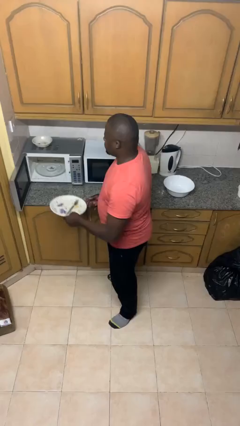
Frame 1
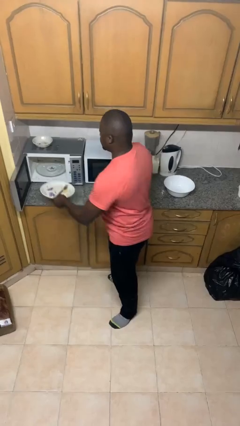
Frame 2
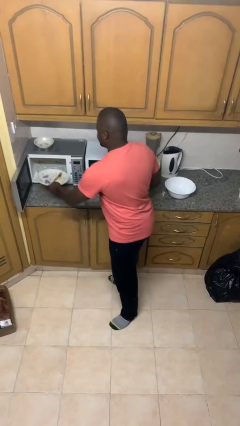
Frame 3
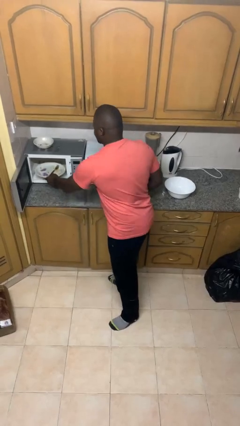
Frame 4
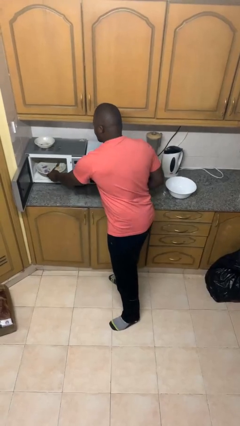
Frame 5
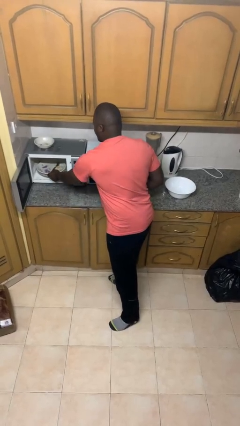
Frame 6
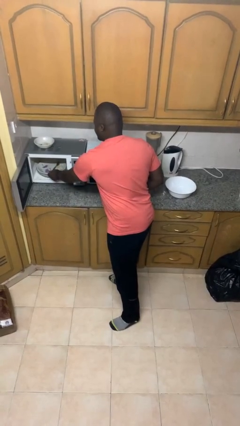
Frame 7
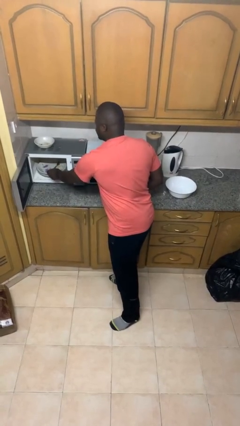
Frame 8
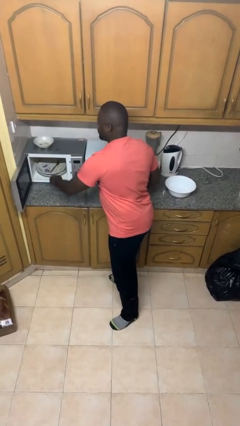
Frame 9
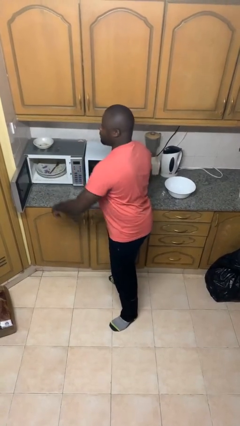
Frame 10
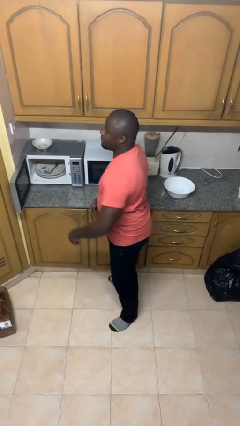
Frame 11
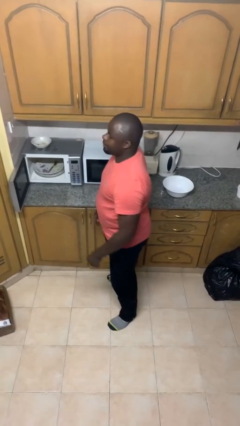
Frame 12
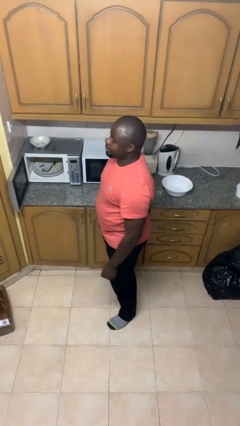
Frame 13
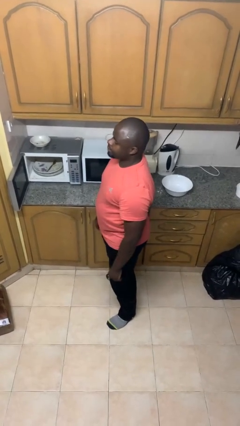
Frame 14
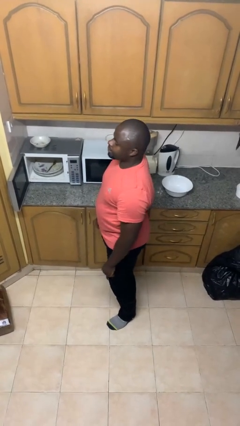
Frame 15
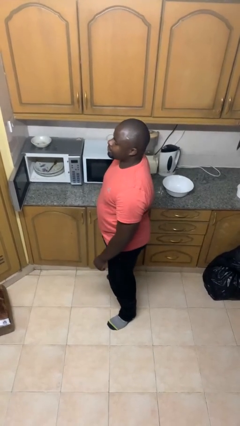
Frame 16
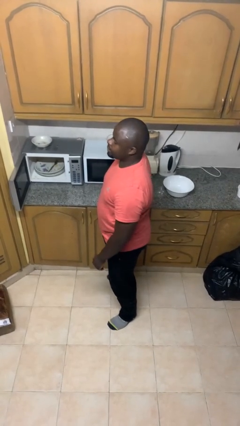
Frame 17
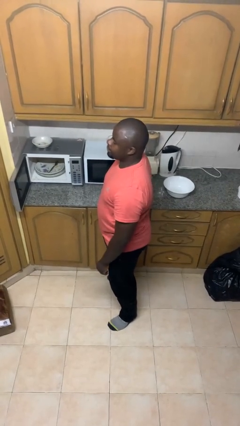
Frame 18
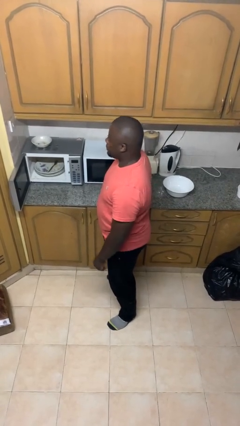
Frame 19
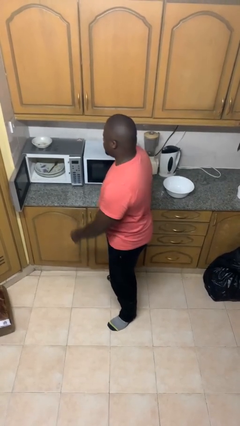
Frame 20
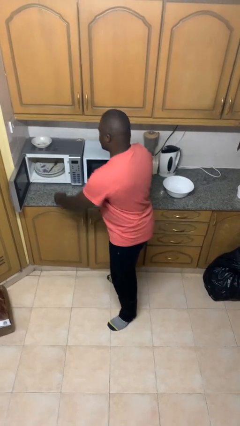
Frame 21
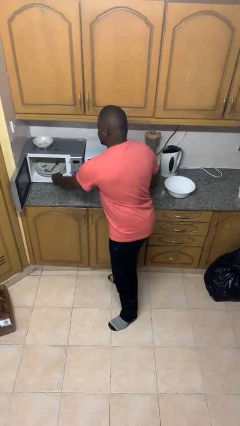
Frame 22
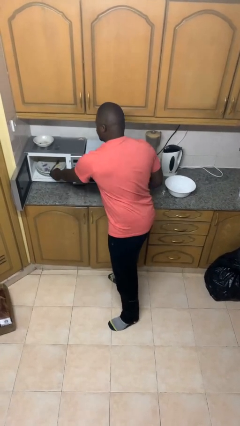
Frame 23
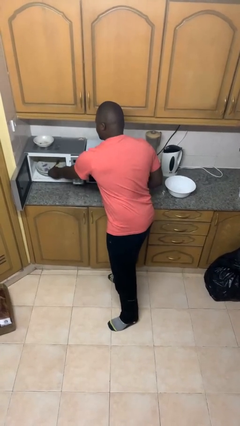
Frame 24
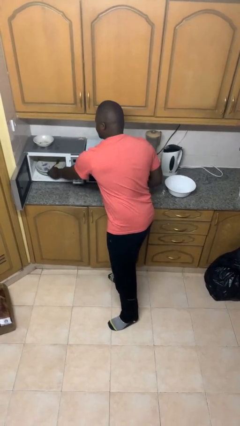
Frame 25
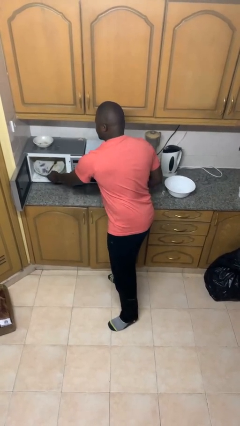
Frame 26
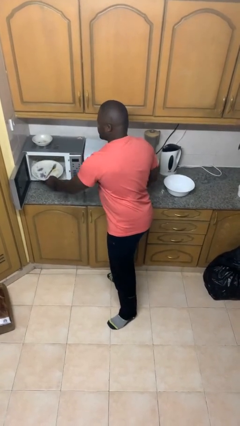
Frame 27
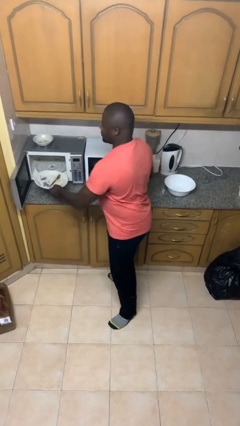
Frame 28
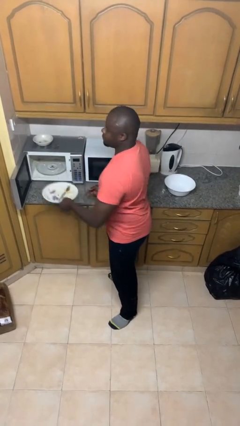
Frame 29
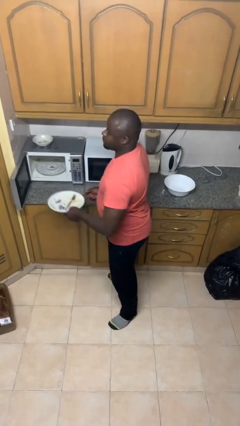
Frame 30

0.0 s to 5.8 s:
person puts object into microwave

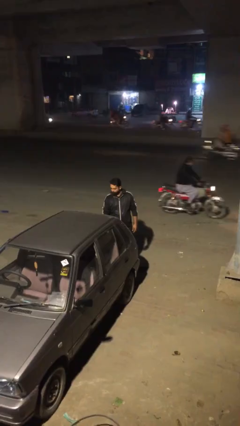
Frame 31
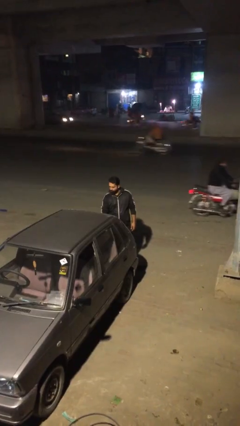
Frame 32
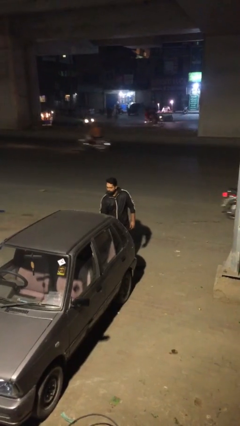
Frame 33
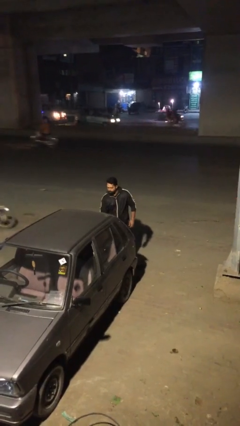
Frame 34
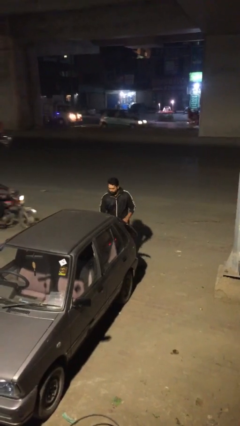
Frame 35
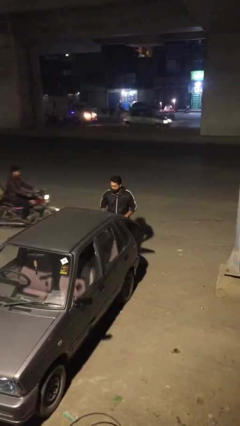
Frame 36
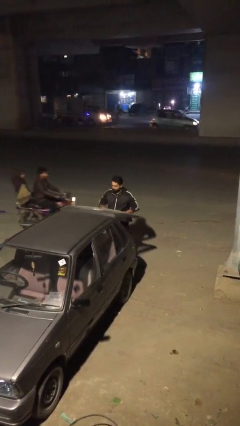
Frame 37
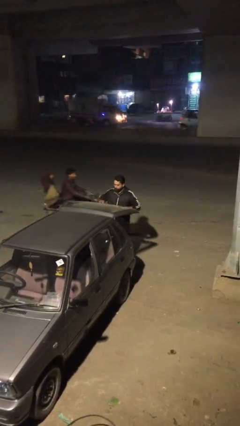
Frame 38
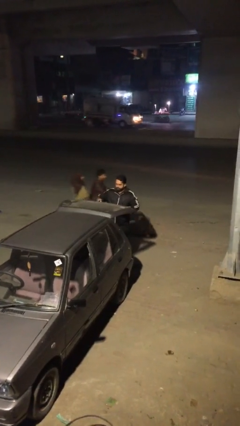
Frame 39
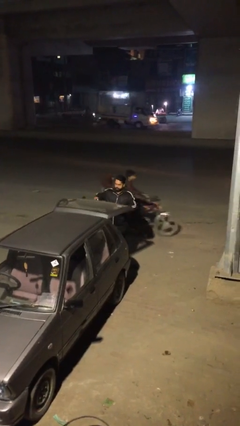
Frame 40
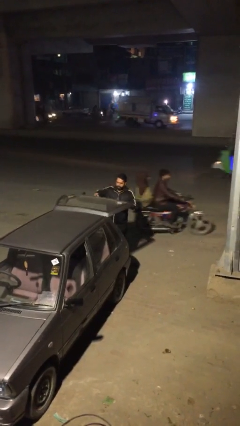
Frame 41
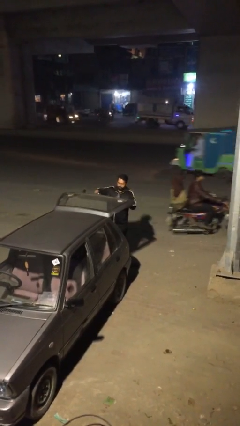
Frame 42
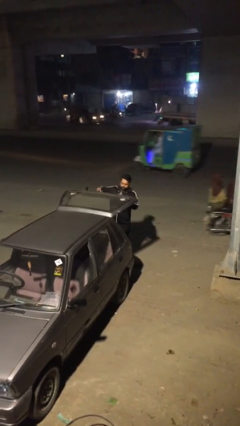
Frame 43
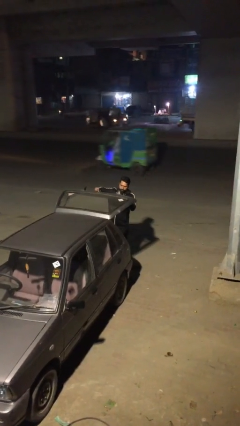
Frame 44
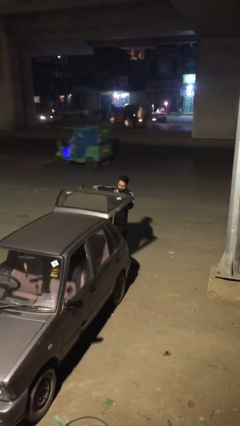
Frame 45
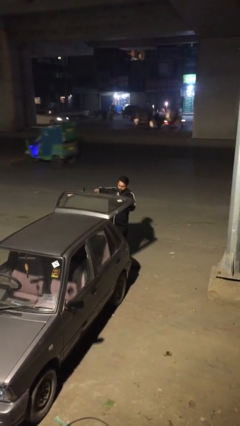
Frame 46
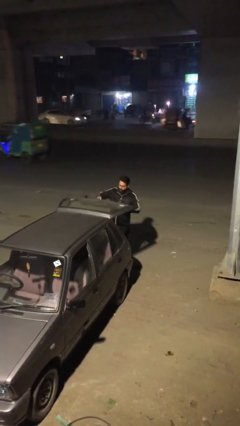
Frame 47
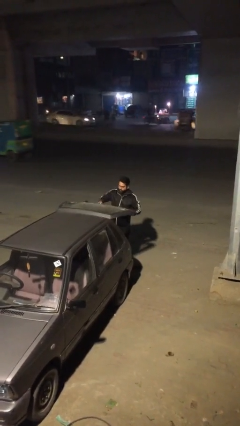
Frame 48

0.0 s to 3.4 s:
person opens car trunk

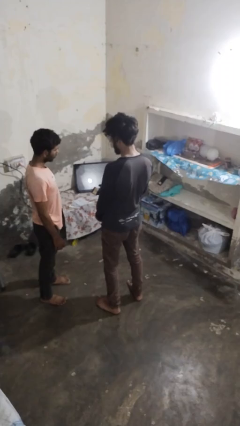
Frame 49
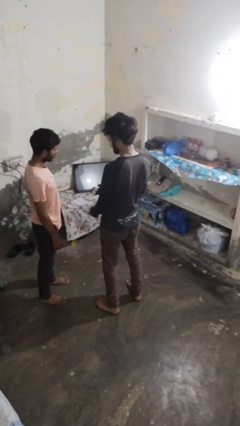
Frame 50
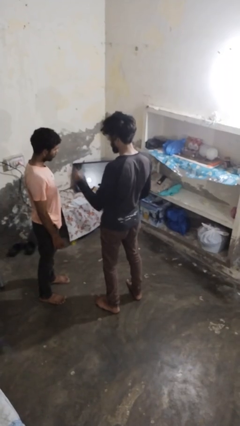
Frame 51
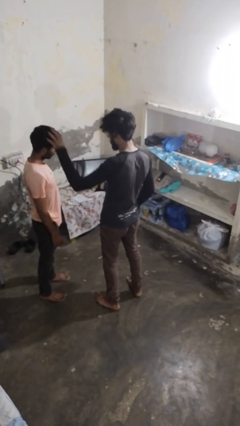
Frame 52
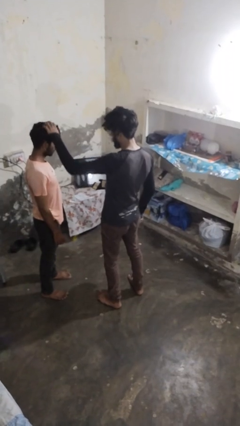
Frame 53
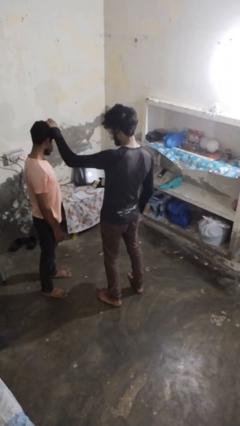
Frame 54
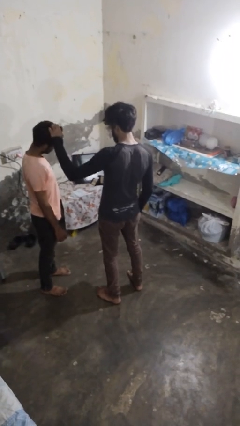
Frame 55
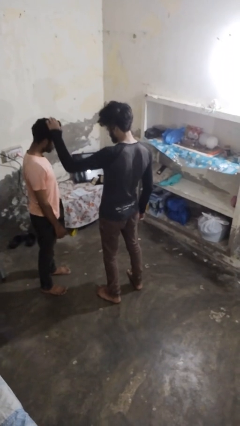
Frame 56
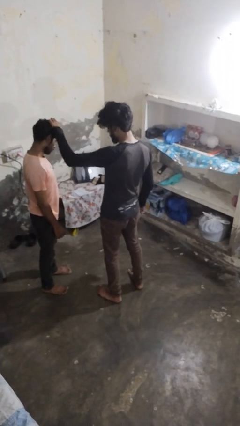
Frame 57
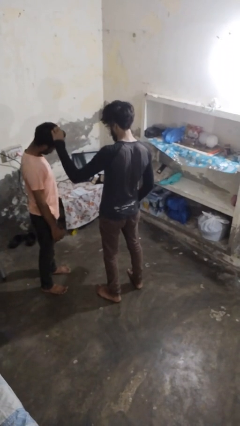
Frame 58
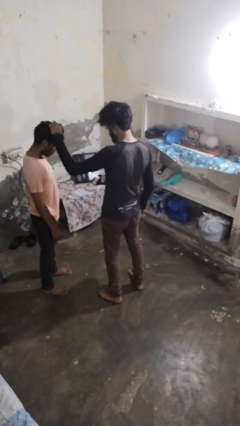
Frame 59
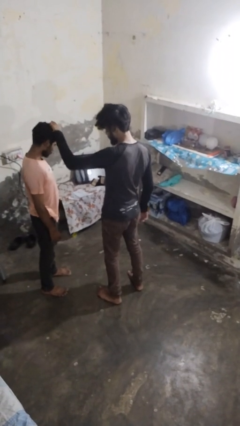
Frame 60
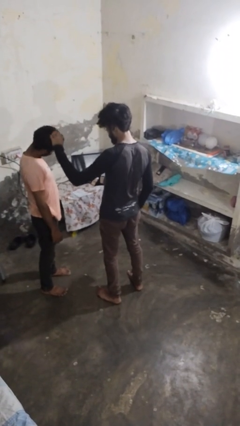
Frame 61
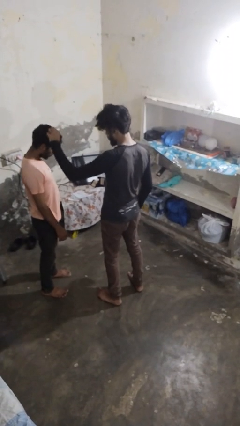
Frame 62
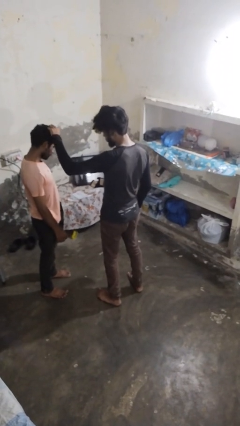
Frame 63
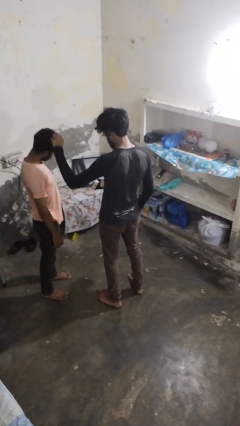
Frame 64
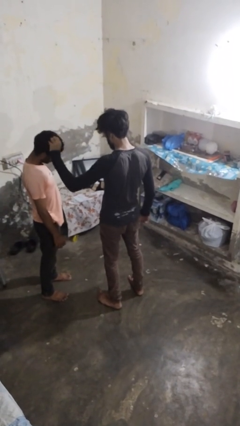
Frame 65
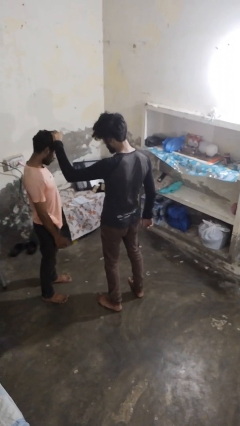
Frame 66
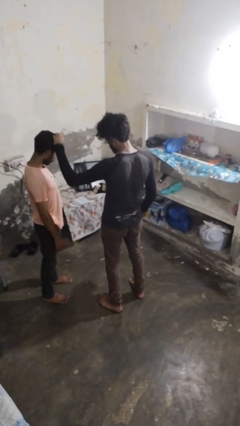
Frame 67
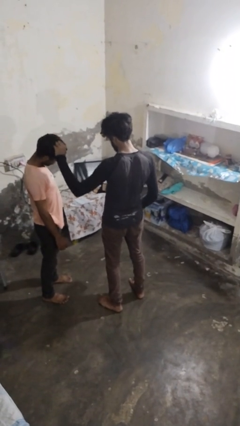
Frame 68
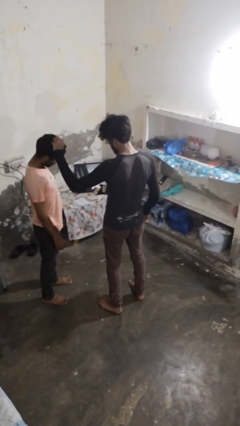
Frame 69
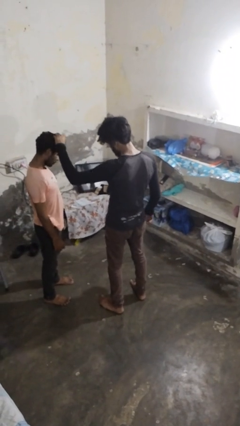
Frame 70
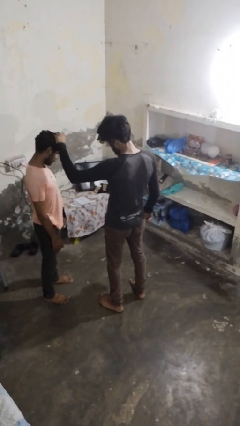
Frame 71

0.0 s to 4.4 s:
person grabs person by hair

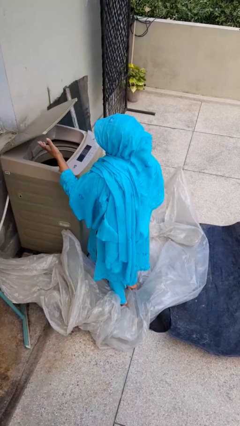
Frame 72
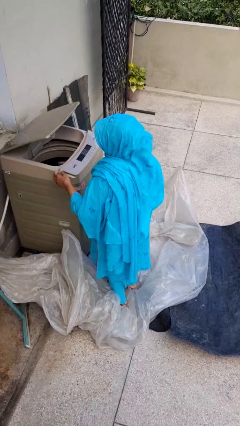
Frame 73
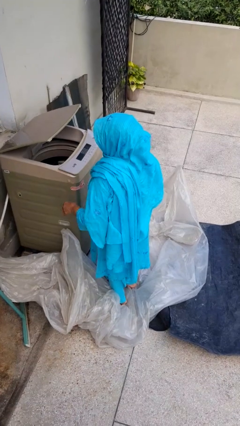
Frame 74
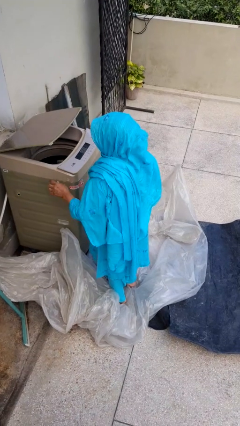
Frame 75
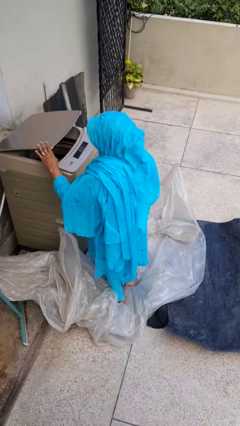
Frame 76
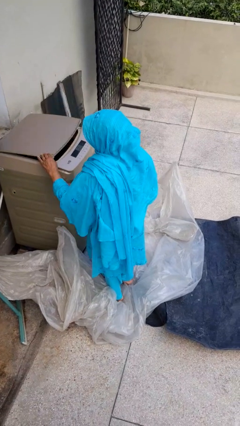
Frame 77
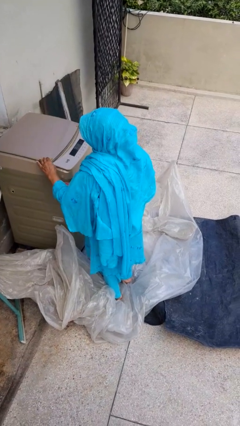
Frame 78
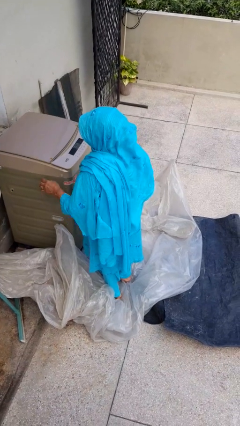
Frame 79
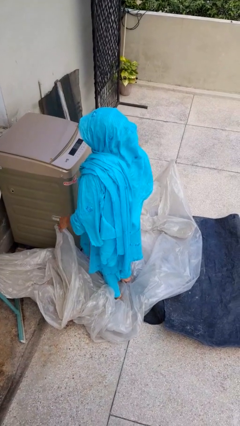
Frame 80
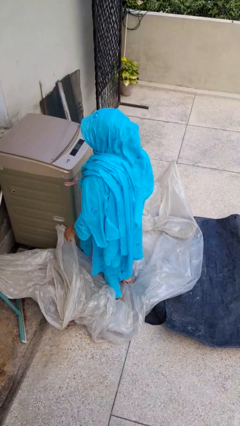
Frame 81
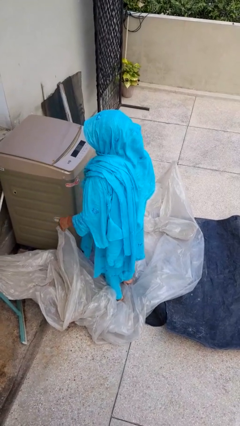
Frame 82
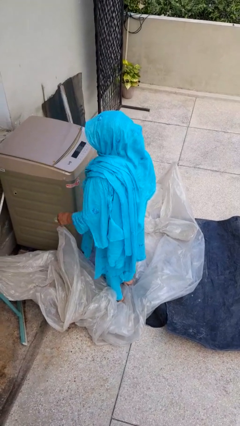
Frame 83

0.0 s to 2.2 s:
person closes clothes washer

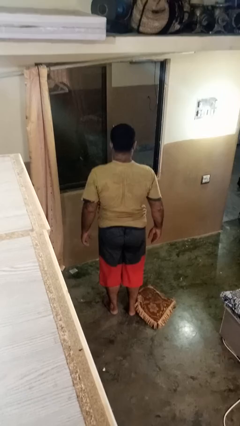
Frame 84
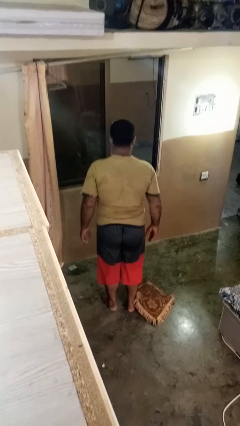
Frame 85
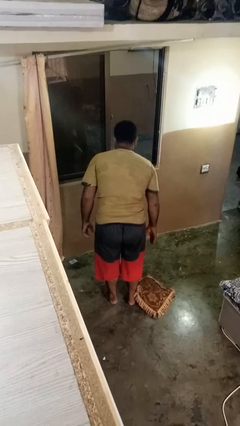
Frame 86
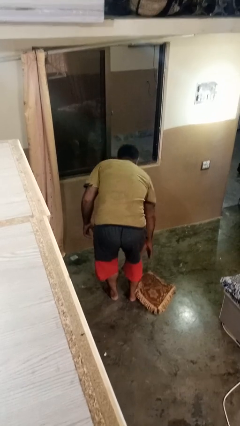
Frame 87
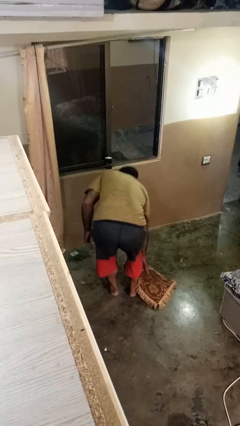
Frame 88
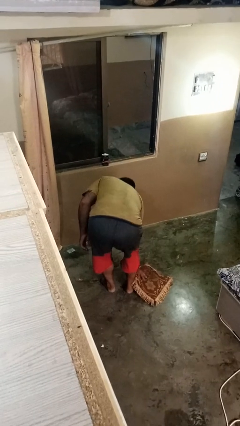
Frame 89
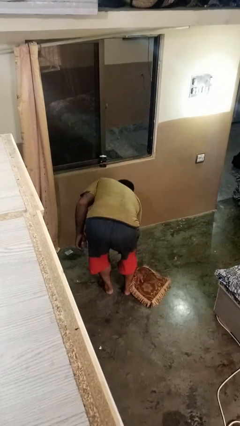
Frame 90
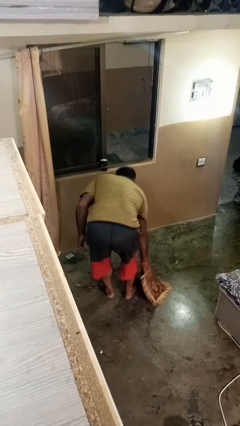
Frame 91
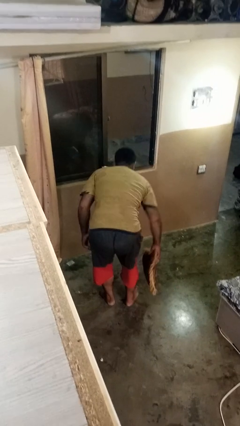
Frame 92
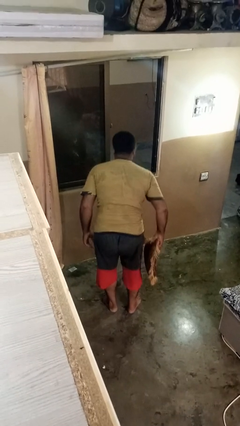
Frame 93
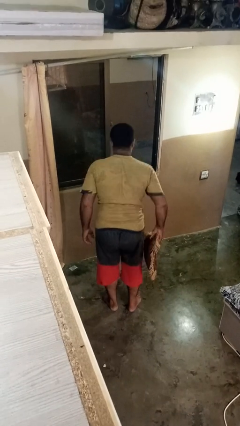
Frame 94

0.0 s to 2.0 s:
person picks up object from floor
